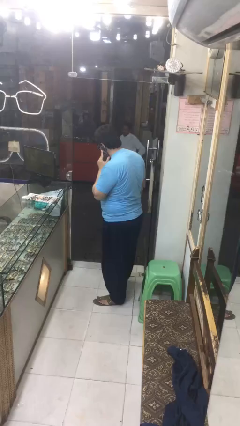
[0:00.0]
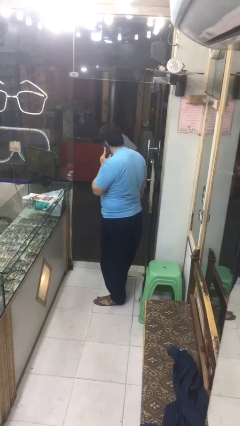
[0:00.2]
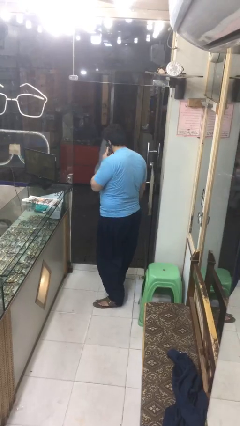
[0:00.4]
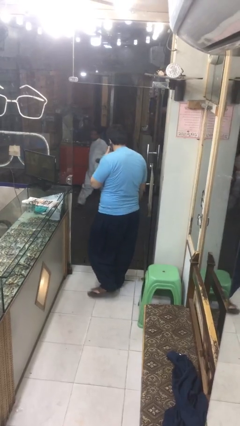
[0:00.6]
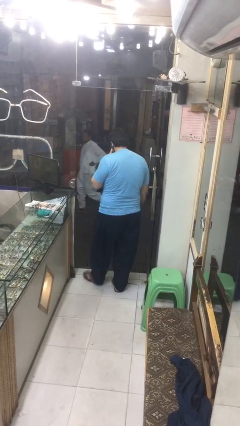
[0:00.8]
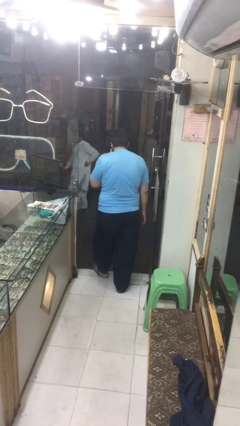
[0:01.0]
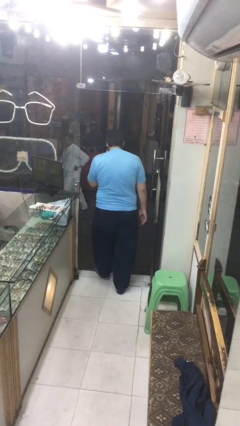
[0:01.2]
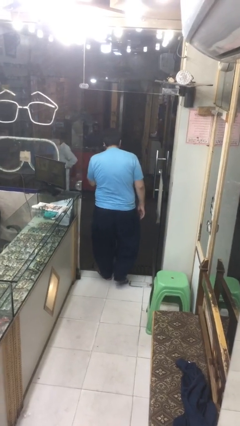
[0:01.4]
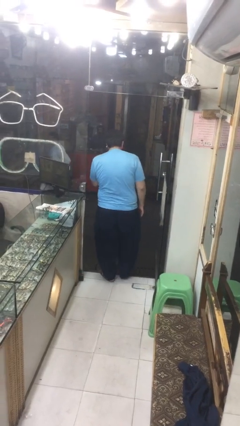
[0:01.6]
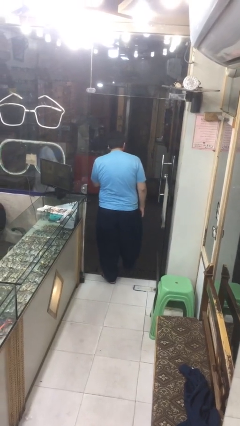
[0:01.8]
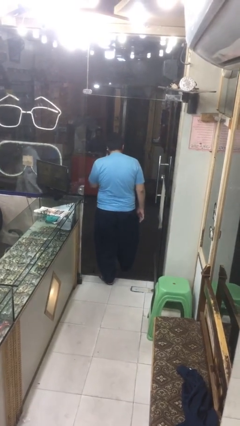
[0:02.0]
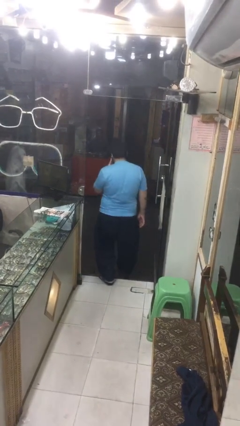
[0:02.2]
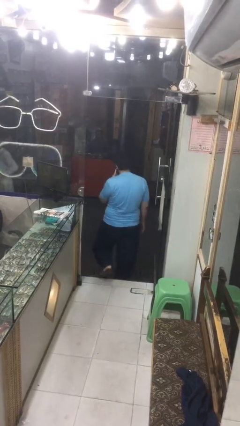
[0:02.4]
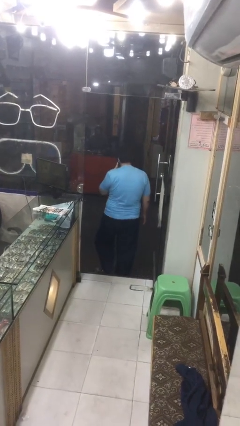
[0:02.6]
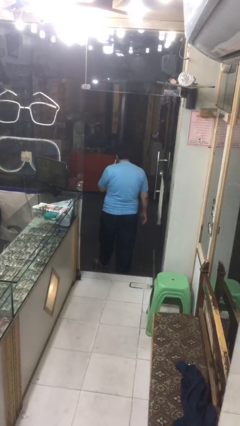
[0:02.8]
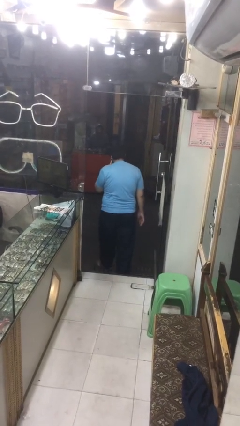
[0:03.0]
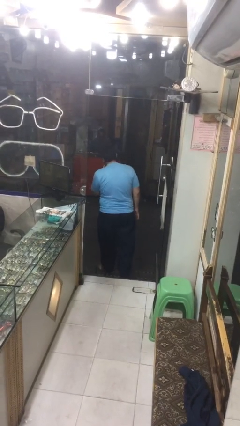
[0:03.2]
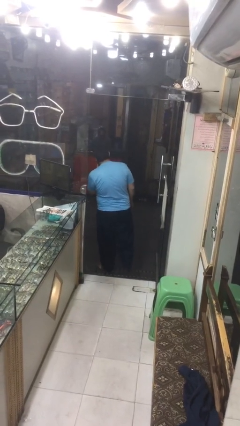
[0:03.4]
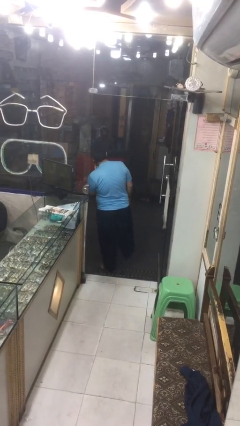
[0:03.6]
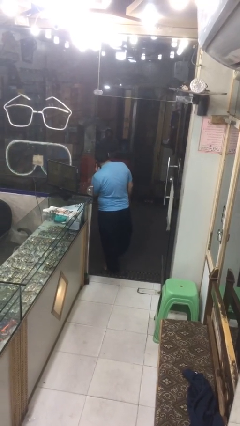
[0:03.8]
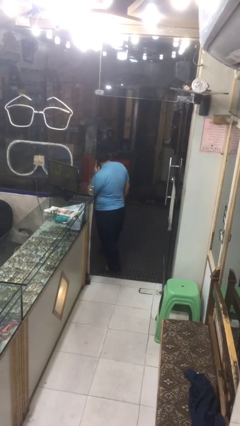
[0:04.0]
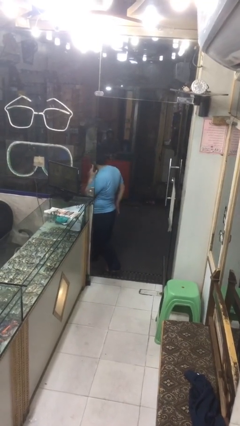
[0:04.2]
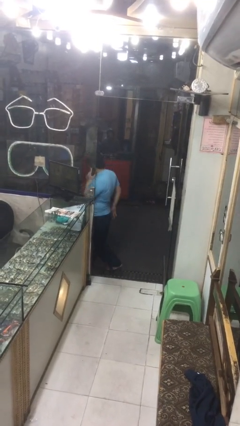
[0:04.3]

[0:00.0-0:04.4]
person exits scene through structure

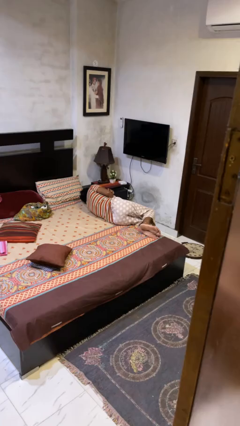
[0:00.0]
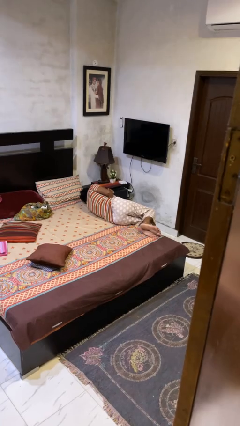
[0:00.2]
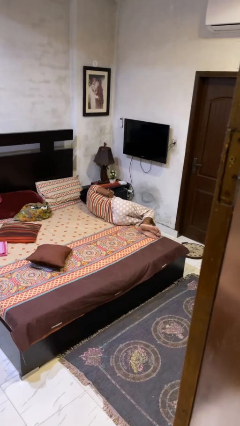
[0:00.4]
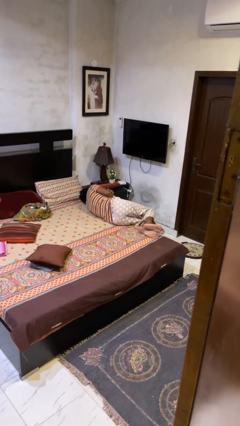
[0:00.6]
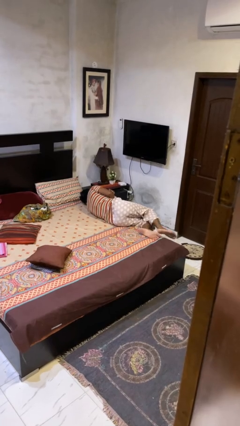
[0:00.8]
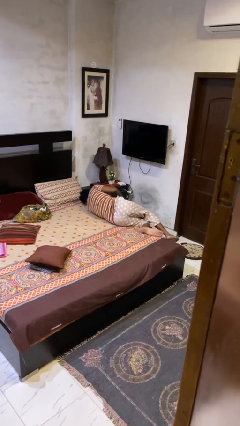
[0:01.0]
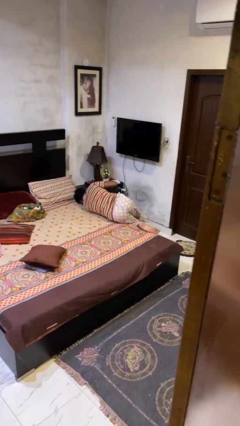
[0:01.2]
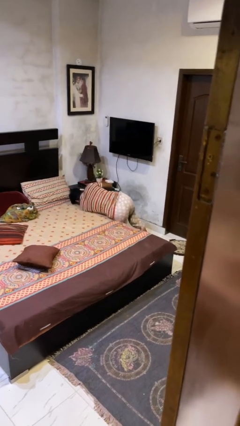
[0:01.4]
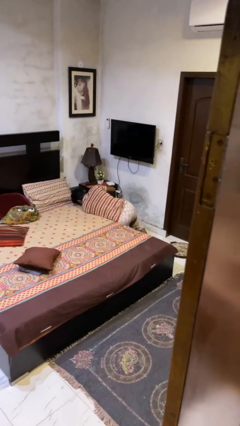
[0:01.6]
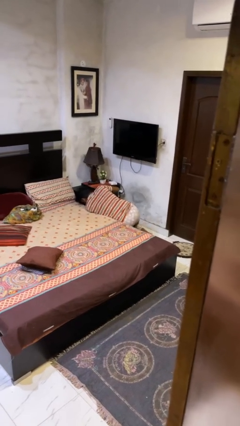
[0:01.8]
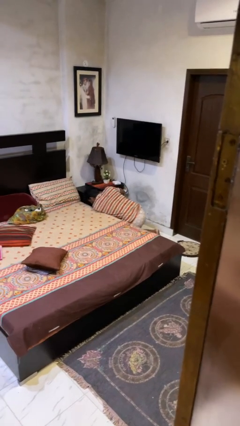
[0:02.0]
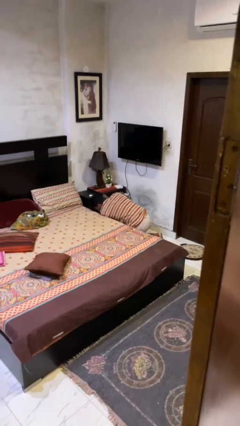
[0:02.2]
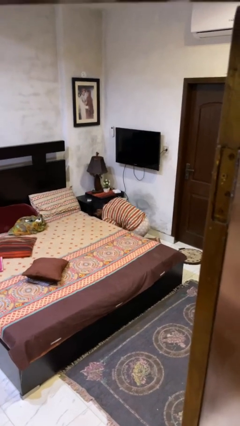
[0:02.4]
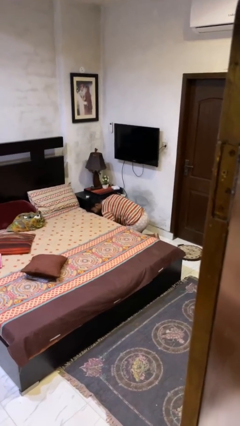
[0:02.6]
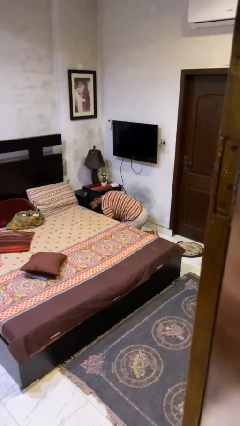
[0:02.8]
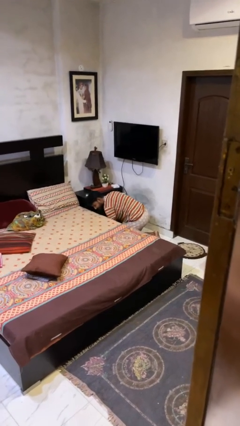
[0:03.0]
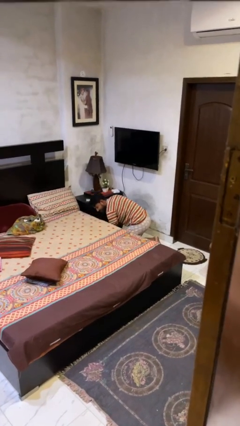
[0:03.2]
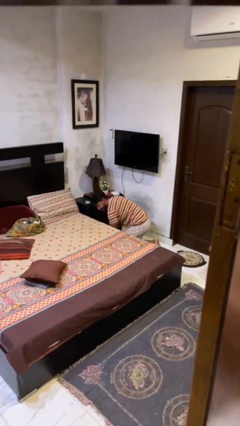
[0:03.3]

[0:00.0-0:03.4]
person falls from bed

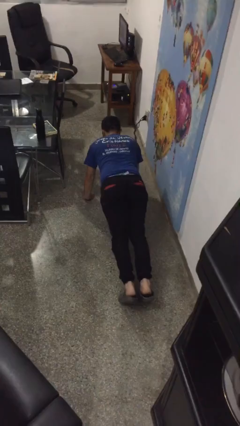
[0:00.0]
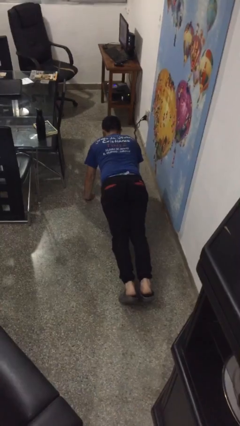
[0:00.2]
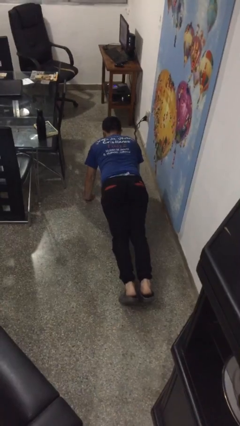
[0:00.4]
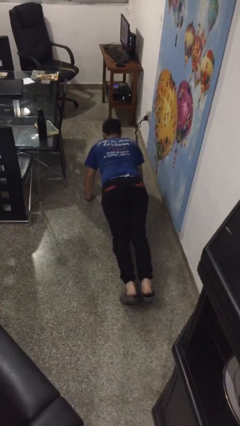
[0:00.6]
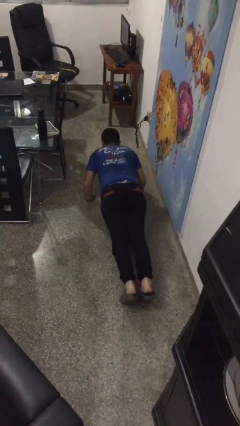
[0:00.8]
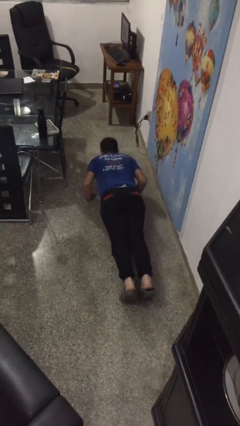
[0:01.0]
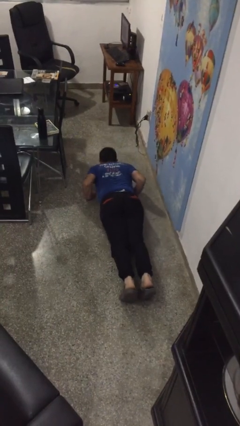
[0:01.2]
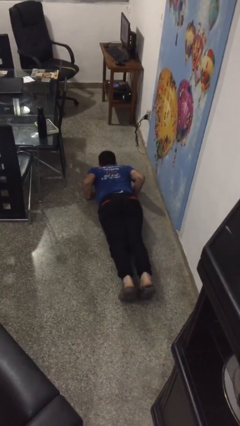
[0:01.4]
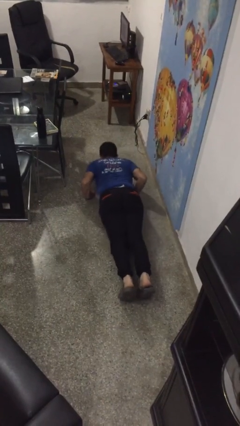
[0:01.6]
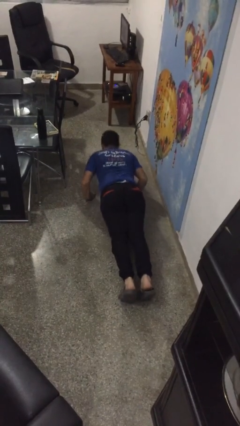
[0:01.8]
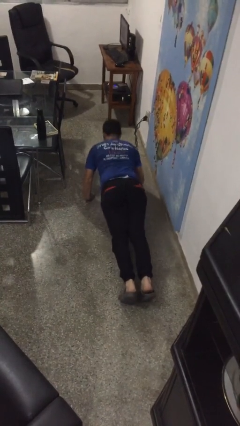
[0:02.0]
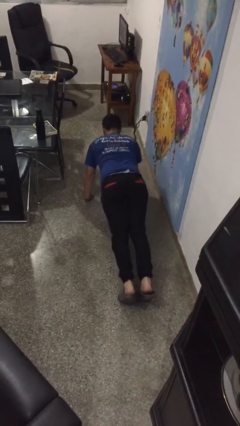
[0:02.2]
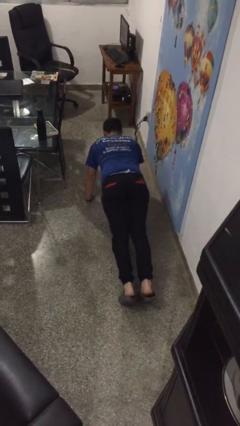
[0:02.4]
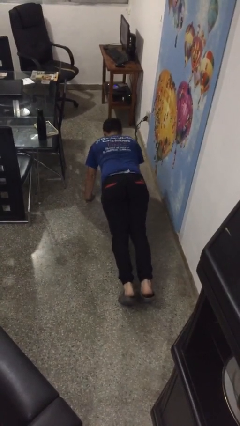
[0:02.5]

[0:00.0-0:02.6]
person exercises with pushup

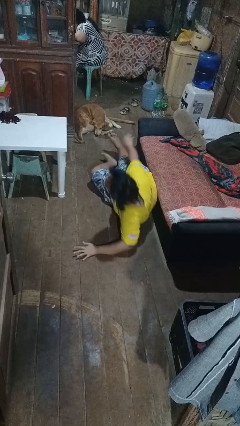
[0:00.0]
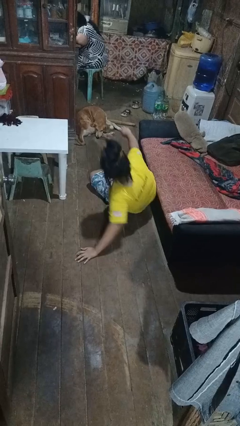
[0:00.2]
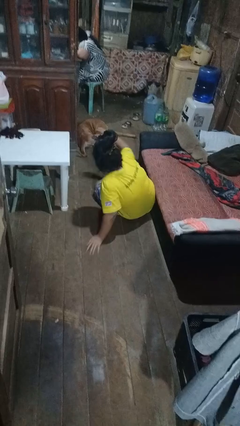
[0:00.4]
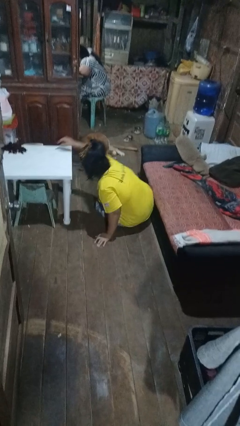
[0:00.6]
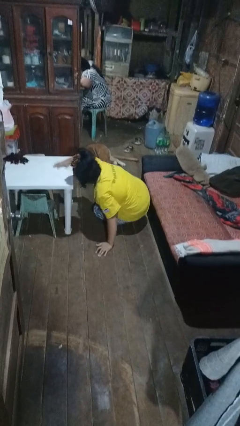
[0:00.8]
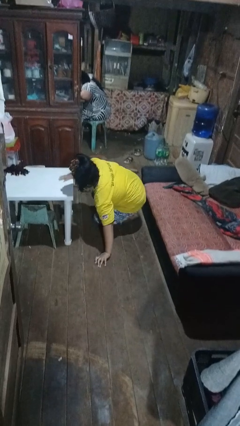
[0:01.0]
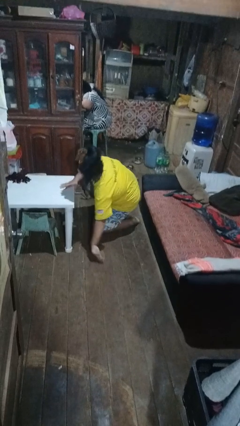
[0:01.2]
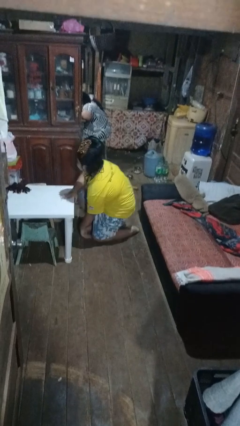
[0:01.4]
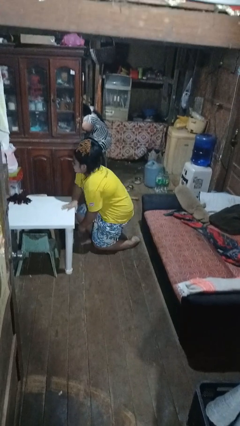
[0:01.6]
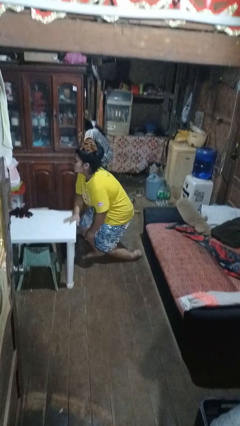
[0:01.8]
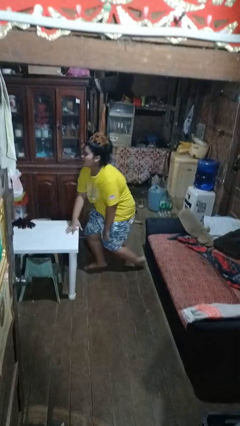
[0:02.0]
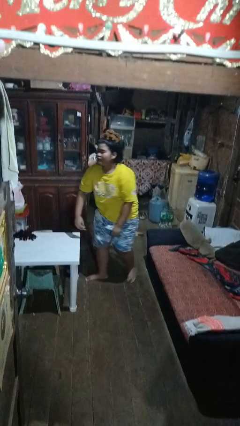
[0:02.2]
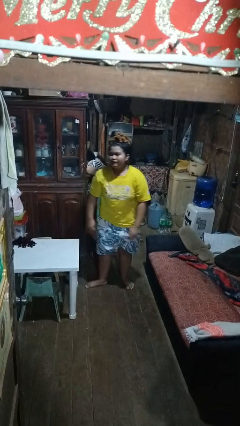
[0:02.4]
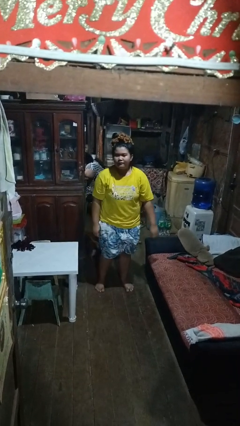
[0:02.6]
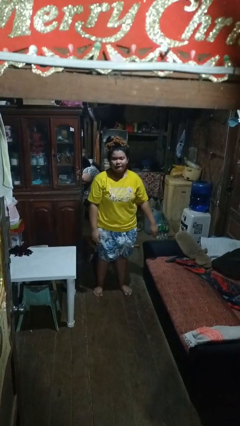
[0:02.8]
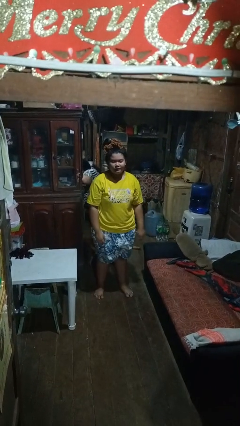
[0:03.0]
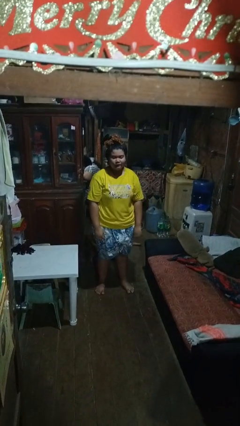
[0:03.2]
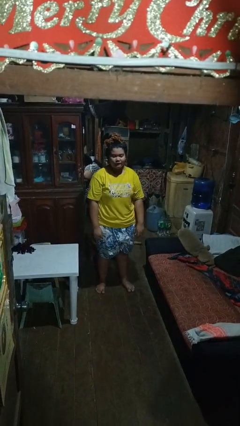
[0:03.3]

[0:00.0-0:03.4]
person stands up from floor

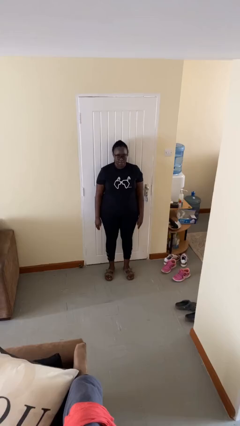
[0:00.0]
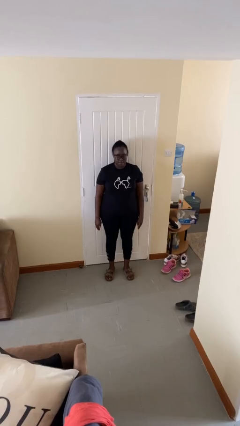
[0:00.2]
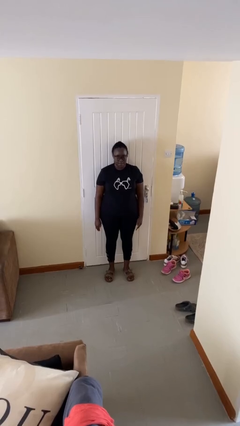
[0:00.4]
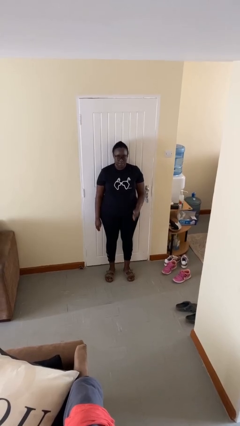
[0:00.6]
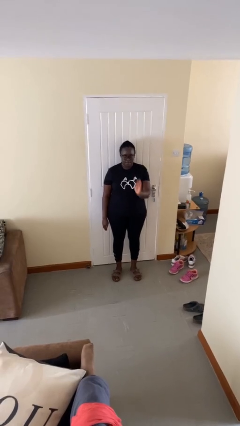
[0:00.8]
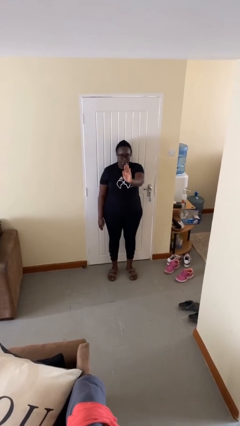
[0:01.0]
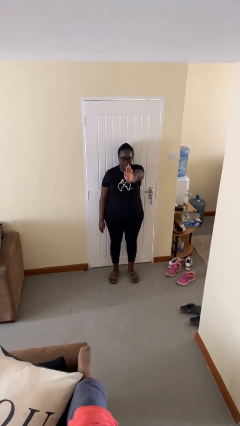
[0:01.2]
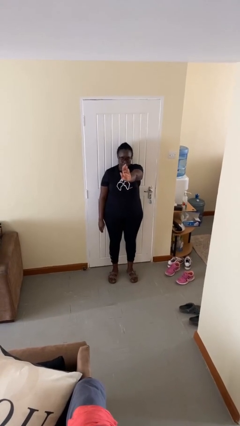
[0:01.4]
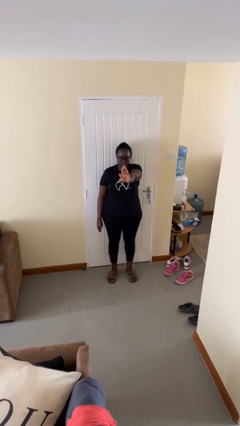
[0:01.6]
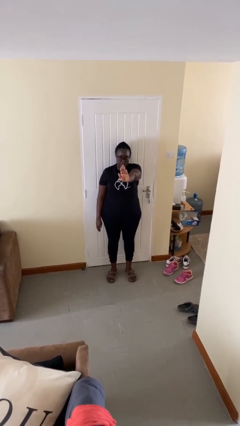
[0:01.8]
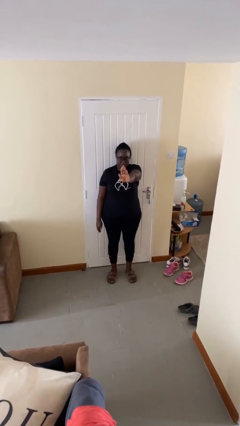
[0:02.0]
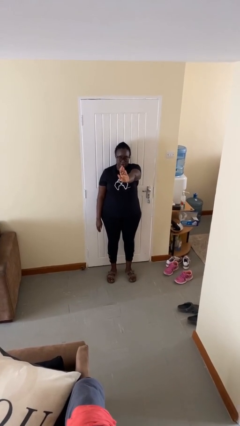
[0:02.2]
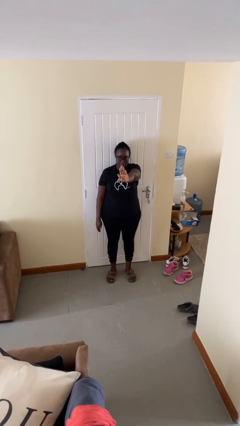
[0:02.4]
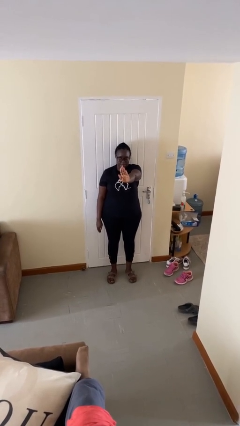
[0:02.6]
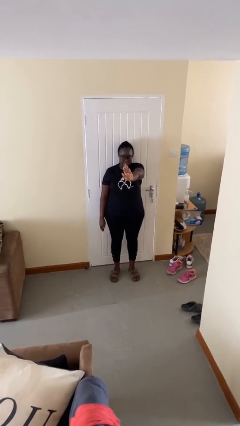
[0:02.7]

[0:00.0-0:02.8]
person gestures stop

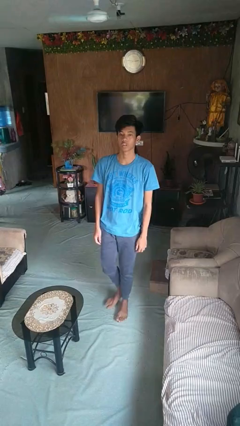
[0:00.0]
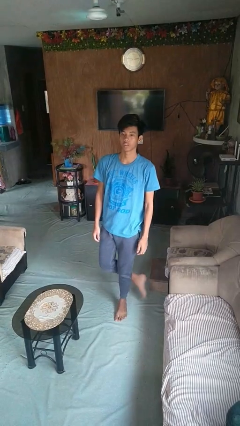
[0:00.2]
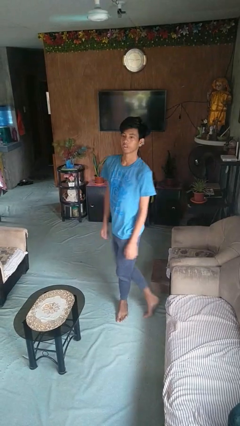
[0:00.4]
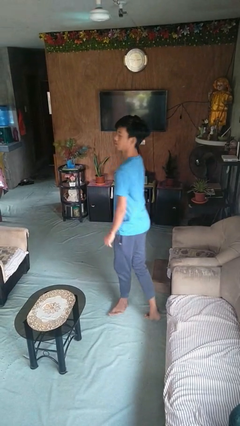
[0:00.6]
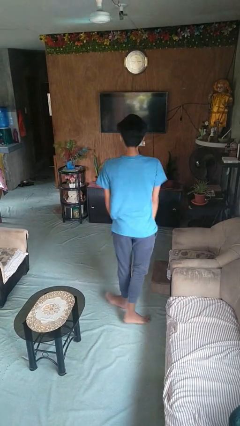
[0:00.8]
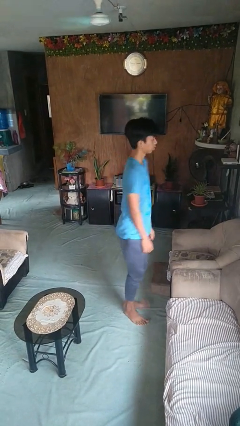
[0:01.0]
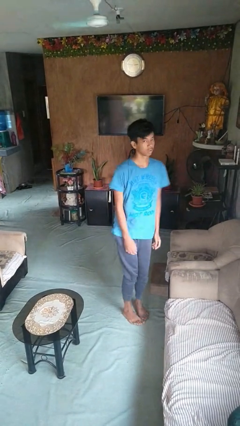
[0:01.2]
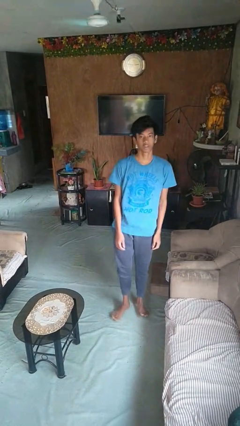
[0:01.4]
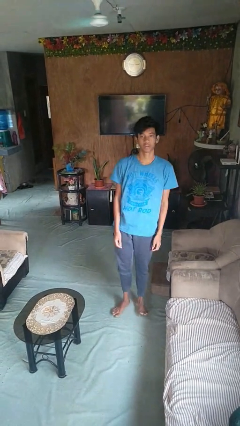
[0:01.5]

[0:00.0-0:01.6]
person twirls
